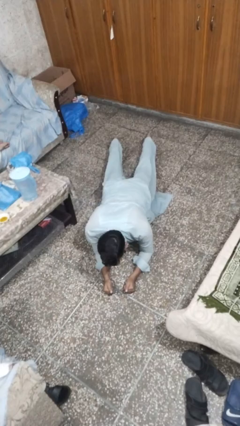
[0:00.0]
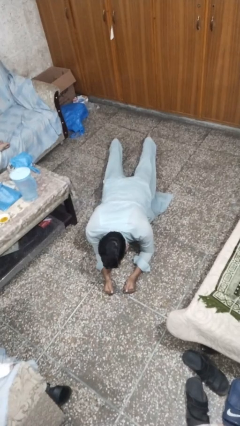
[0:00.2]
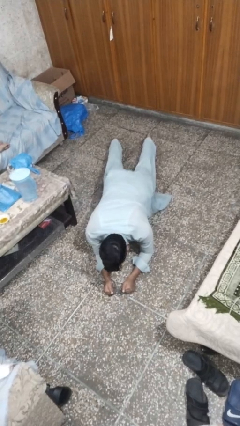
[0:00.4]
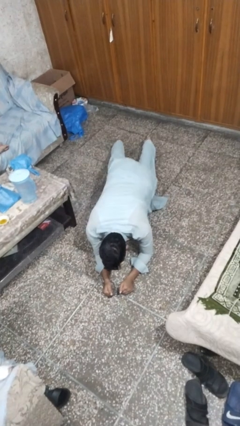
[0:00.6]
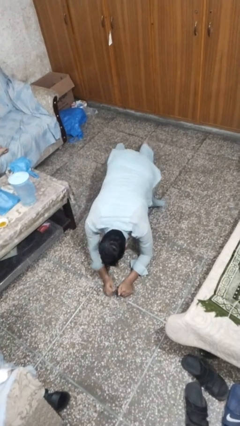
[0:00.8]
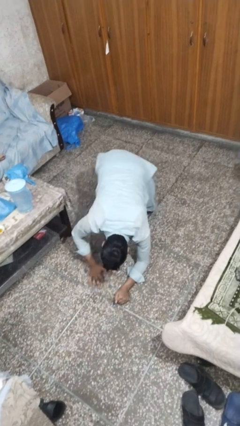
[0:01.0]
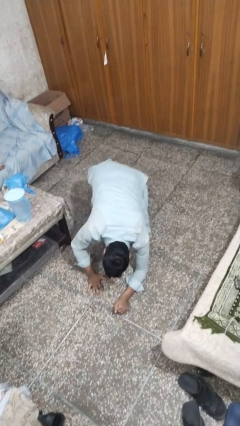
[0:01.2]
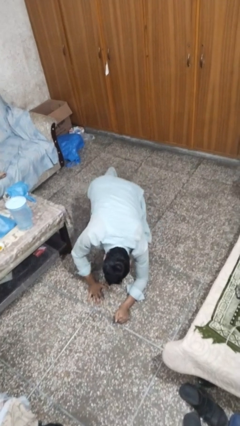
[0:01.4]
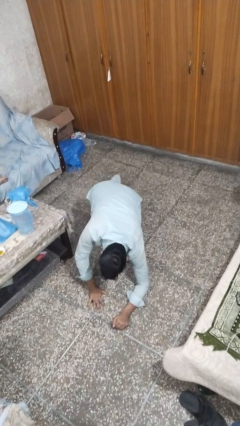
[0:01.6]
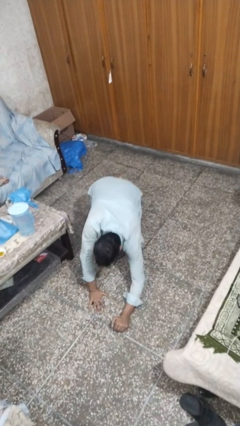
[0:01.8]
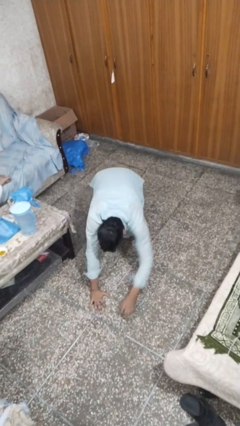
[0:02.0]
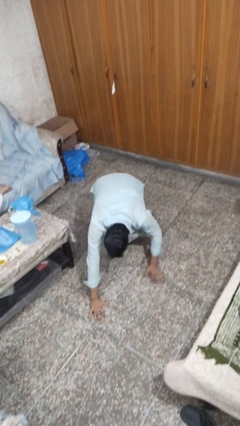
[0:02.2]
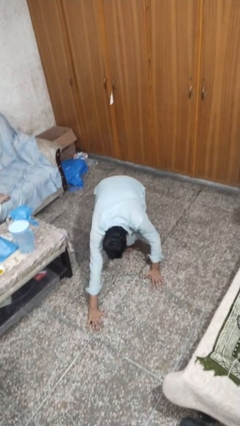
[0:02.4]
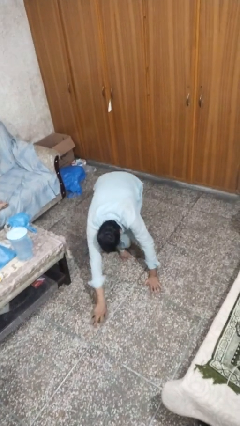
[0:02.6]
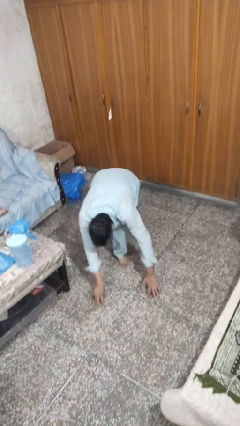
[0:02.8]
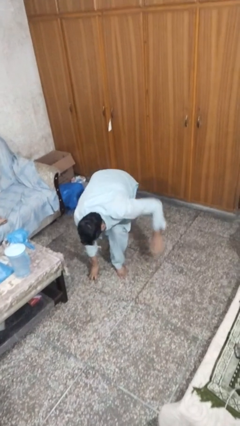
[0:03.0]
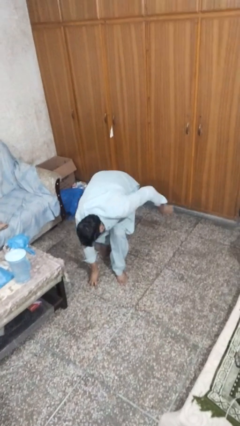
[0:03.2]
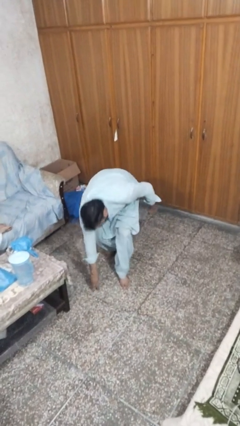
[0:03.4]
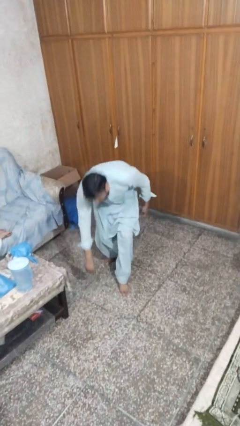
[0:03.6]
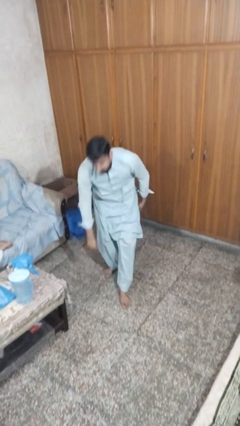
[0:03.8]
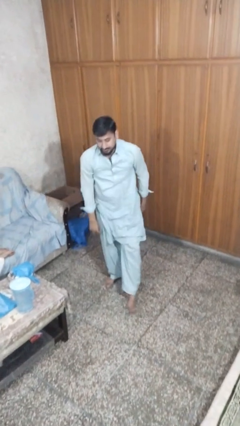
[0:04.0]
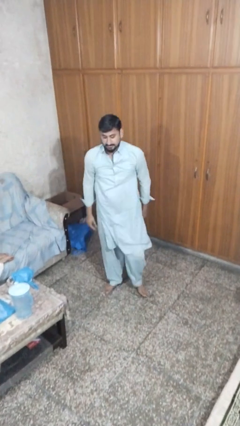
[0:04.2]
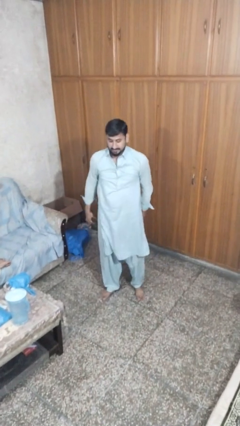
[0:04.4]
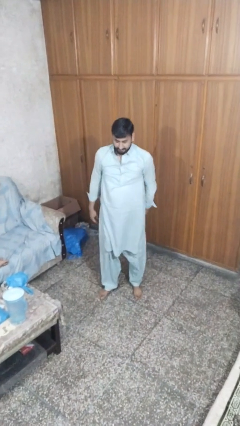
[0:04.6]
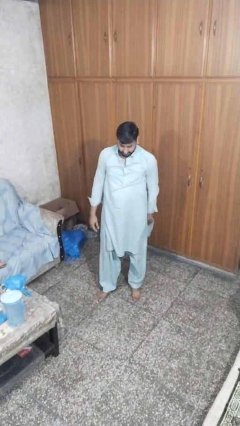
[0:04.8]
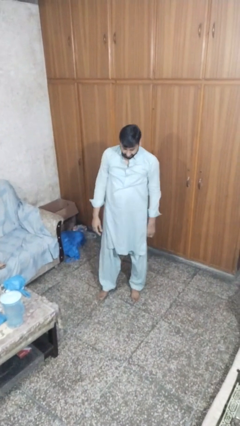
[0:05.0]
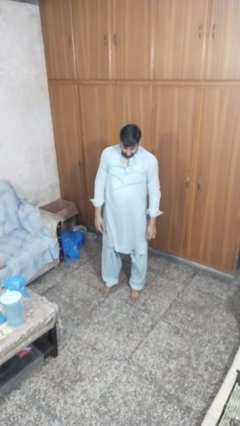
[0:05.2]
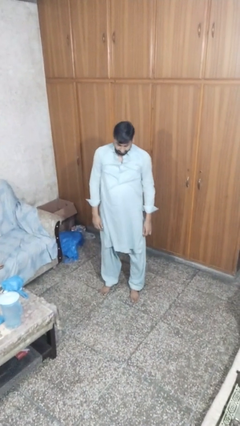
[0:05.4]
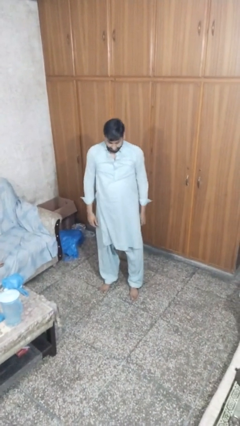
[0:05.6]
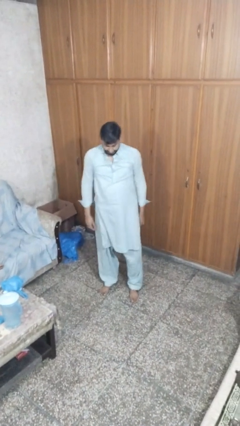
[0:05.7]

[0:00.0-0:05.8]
person stands up from floor

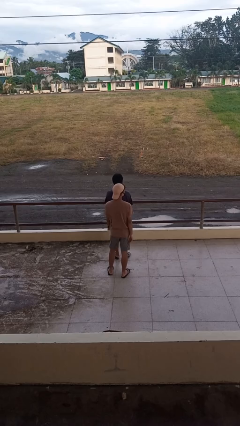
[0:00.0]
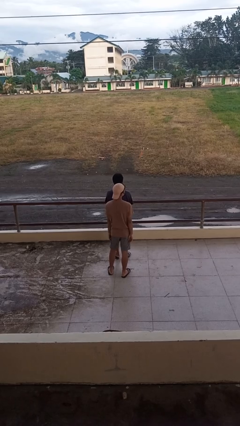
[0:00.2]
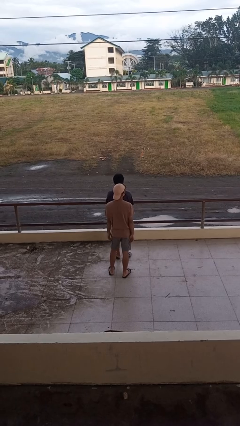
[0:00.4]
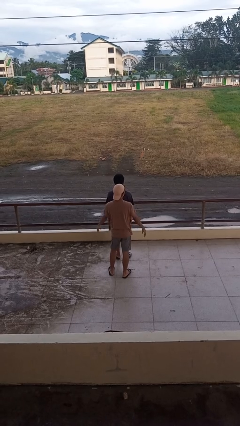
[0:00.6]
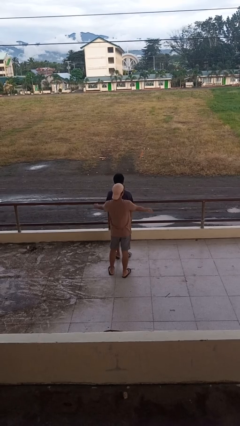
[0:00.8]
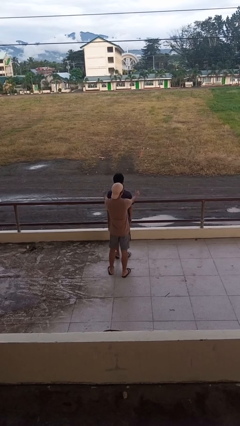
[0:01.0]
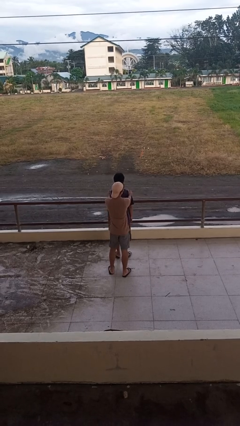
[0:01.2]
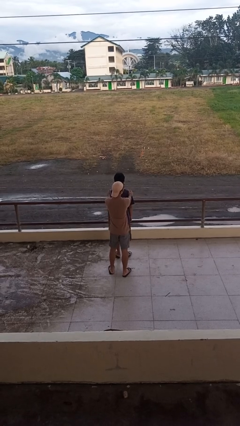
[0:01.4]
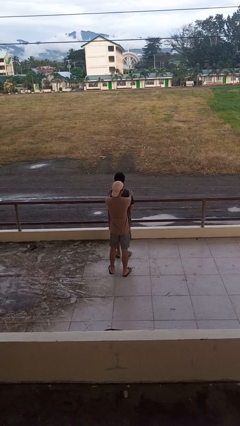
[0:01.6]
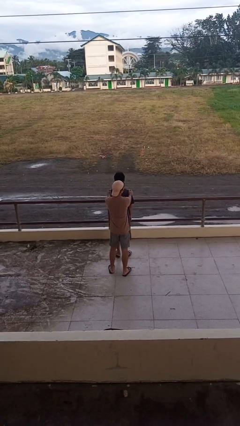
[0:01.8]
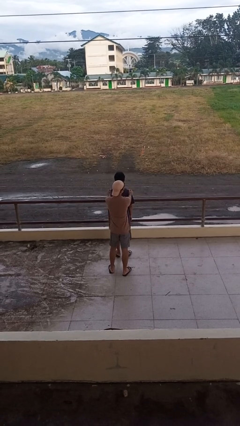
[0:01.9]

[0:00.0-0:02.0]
person pounds shoulders of person

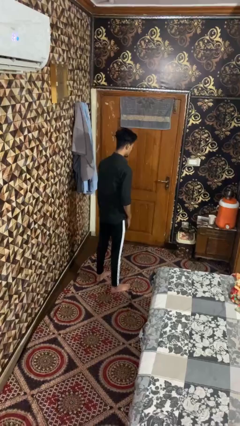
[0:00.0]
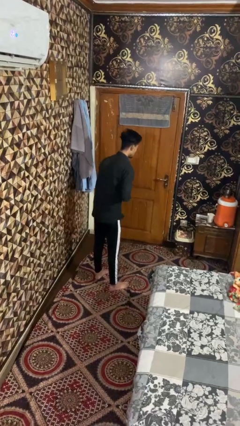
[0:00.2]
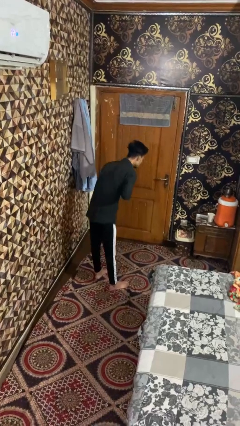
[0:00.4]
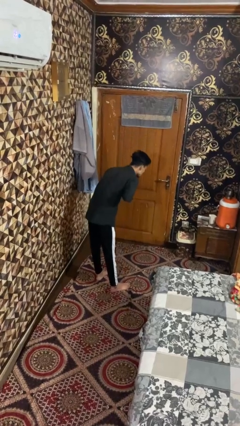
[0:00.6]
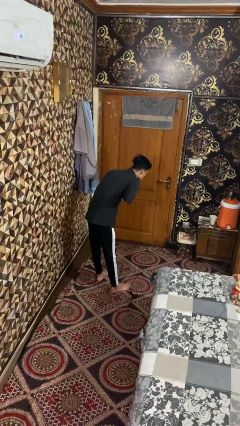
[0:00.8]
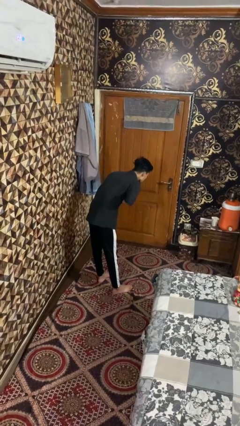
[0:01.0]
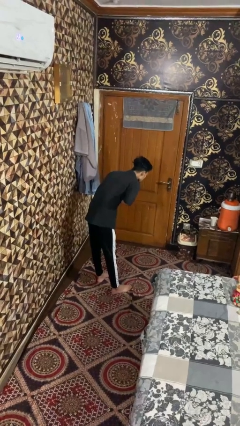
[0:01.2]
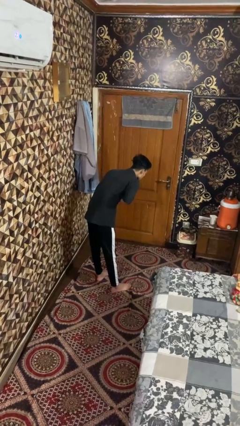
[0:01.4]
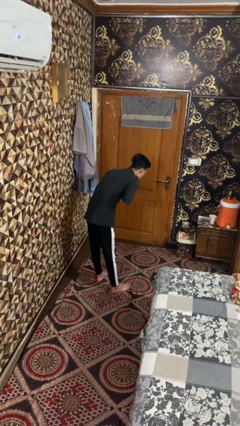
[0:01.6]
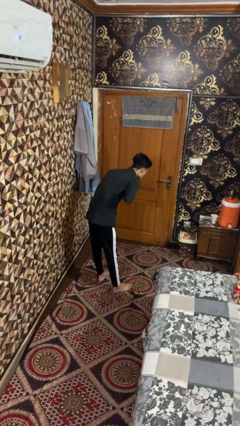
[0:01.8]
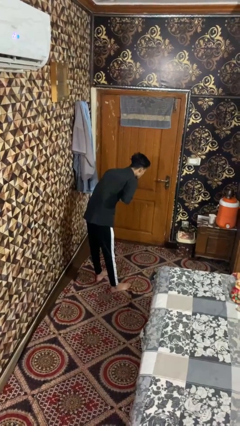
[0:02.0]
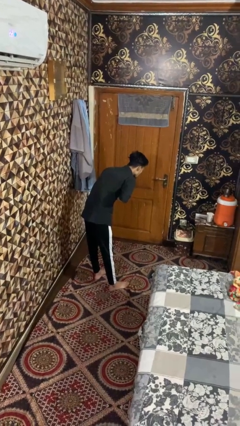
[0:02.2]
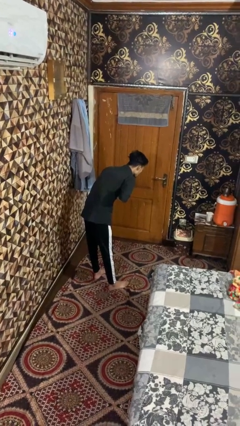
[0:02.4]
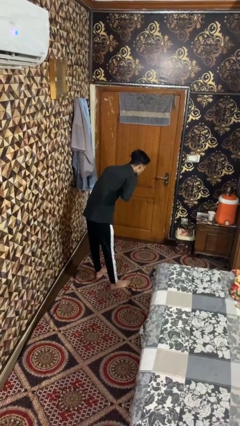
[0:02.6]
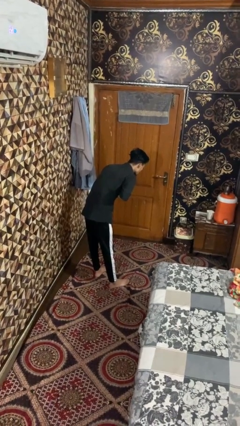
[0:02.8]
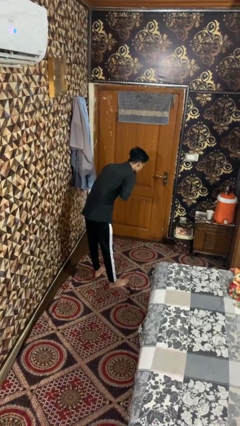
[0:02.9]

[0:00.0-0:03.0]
person bows

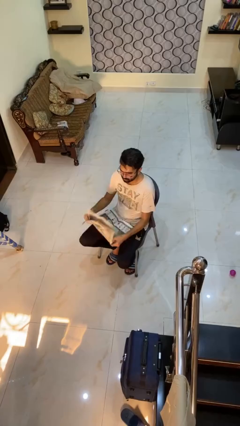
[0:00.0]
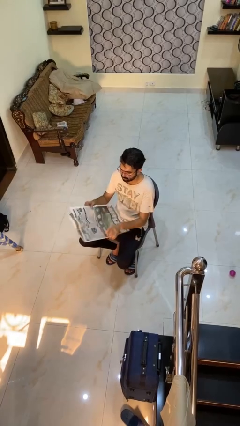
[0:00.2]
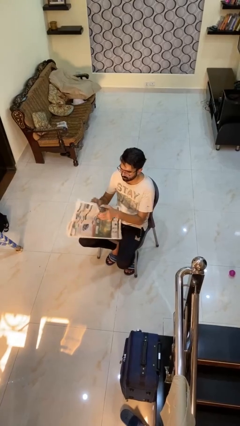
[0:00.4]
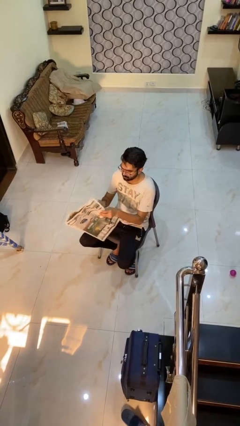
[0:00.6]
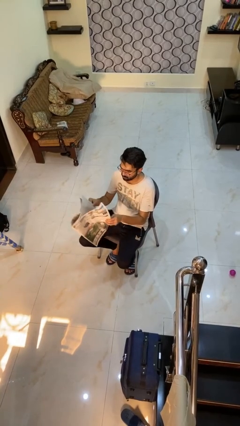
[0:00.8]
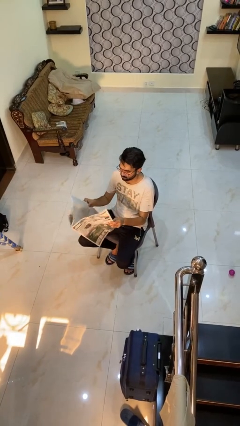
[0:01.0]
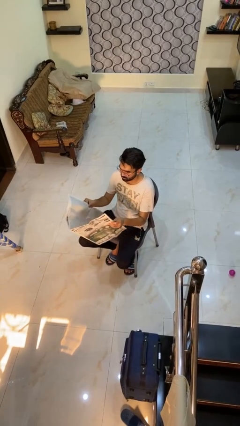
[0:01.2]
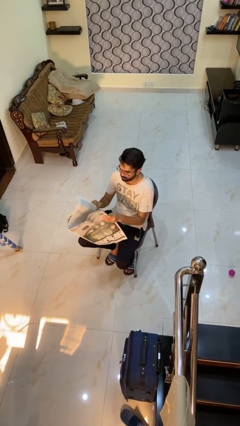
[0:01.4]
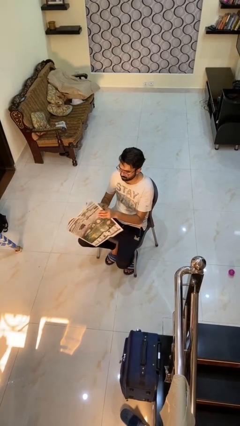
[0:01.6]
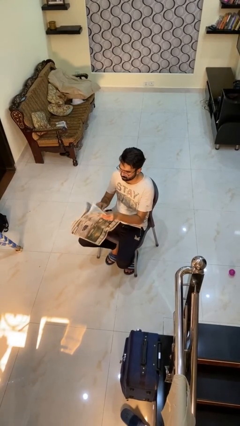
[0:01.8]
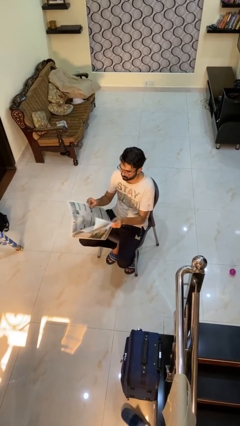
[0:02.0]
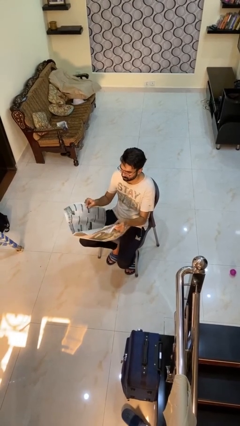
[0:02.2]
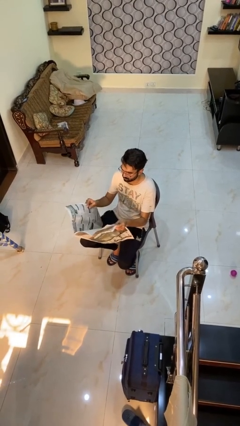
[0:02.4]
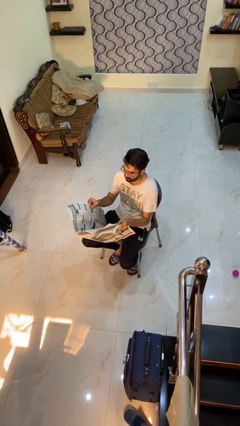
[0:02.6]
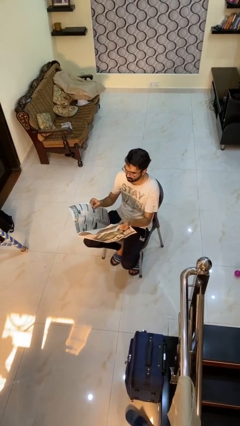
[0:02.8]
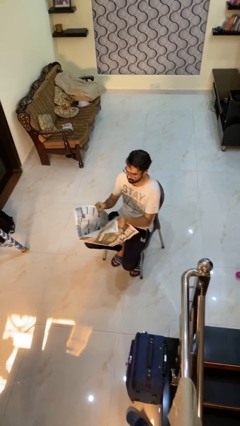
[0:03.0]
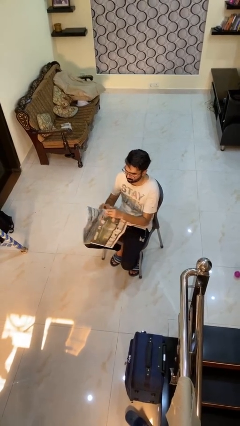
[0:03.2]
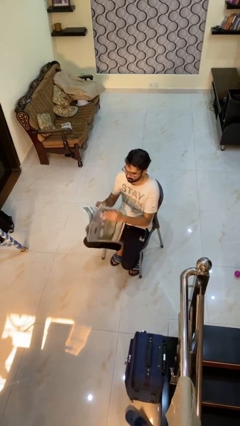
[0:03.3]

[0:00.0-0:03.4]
person reads newspaper

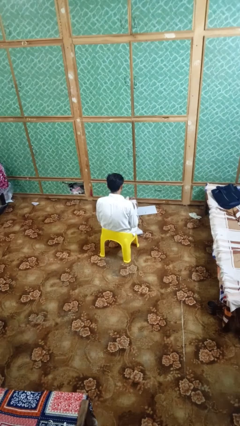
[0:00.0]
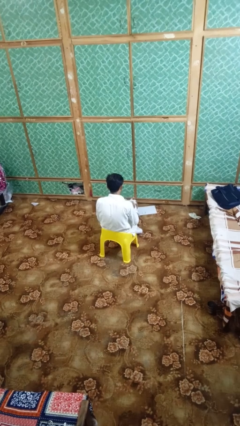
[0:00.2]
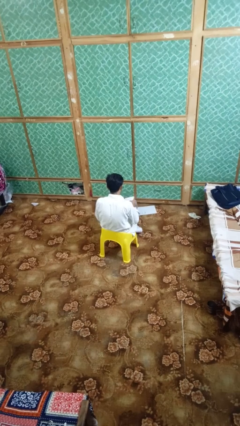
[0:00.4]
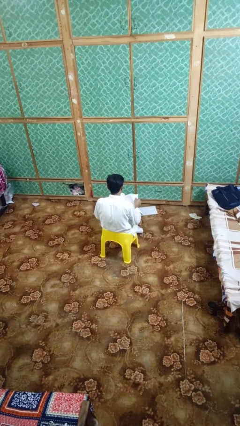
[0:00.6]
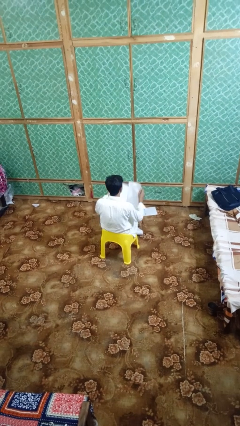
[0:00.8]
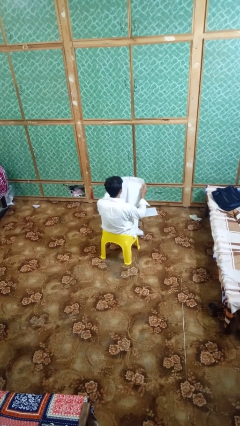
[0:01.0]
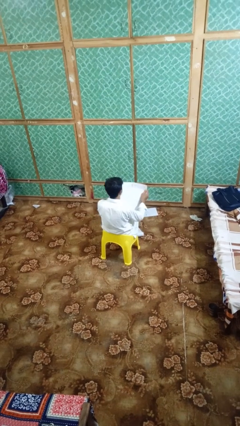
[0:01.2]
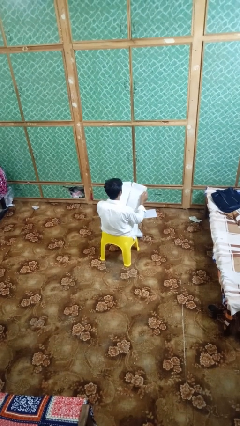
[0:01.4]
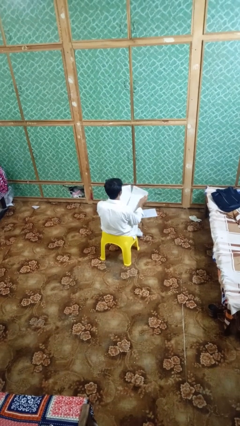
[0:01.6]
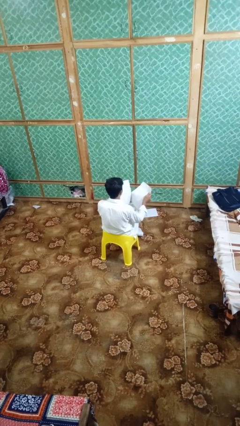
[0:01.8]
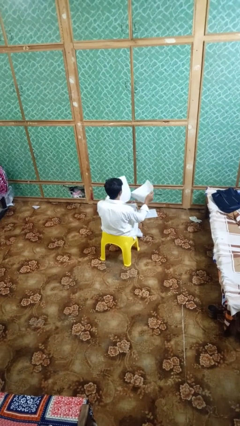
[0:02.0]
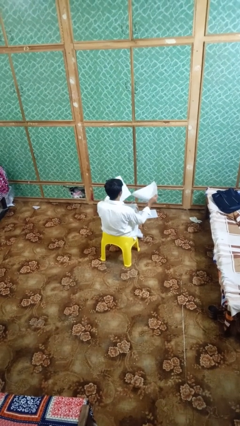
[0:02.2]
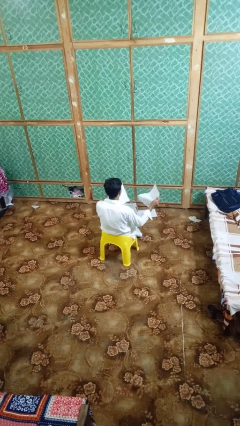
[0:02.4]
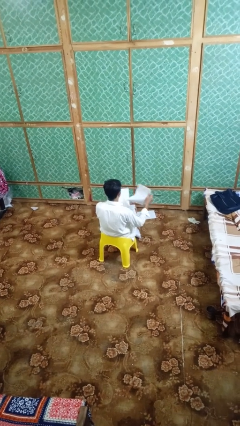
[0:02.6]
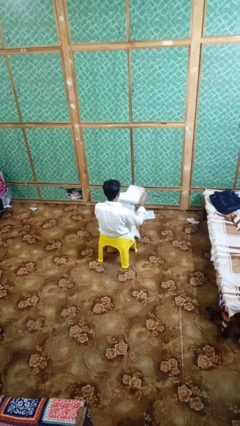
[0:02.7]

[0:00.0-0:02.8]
person tears paper

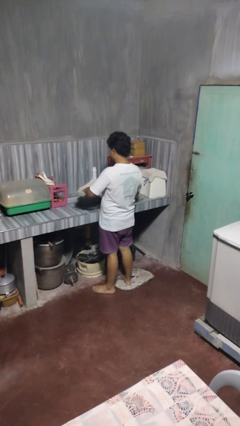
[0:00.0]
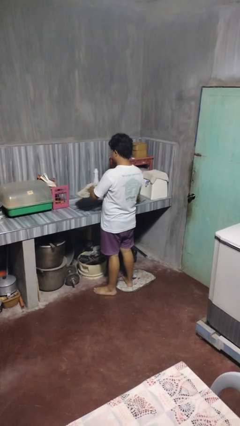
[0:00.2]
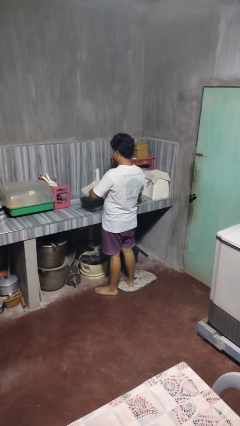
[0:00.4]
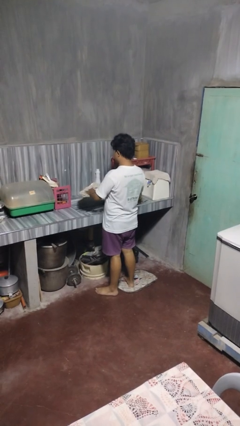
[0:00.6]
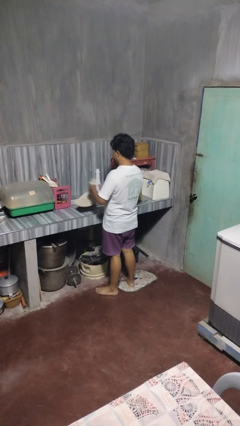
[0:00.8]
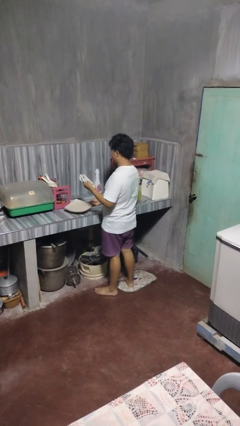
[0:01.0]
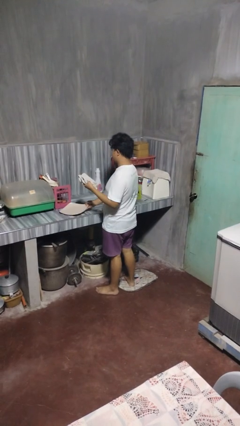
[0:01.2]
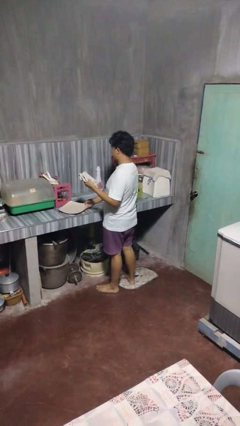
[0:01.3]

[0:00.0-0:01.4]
person dries dish
